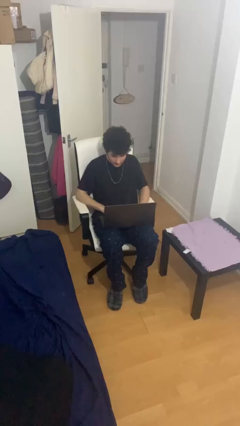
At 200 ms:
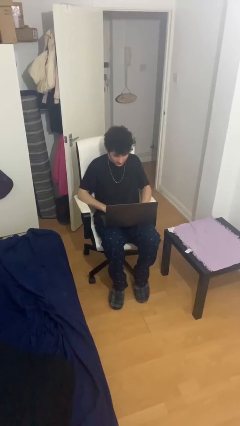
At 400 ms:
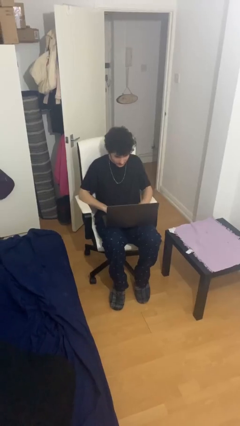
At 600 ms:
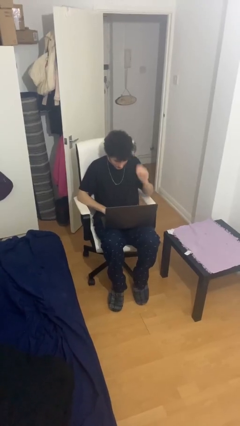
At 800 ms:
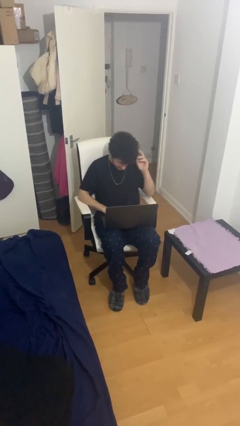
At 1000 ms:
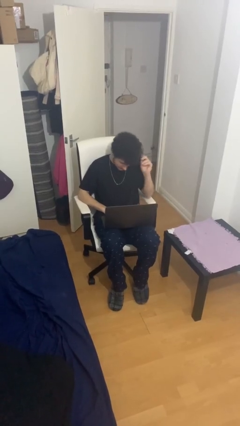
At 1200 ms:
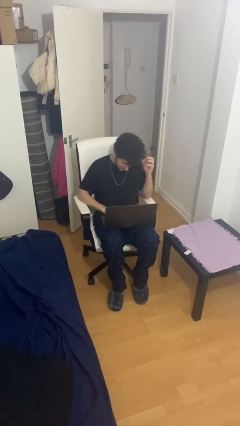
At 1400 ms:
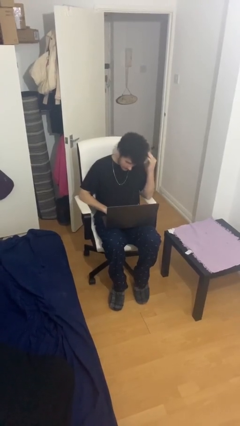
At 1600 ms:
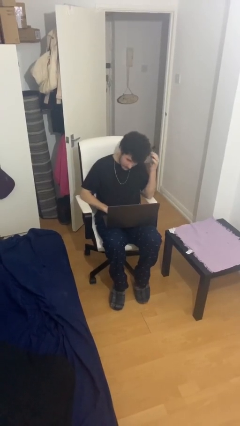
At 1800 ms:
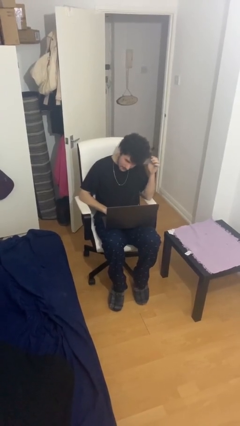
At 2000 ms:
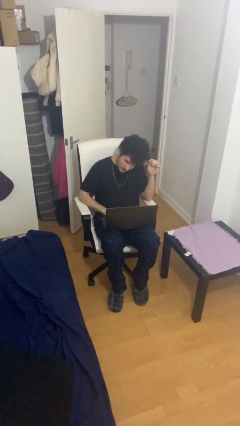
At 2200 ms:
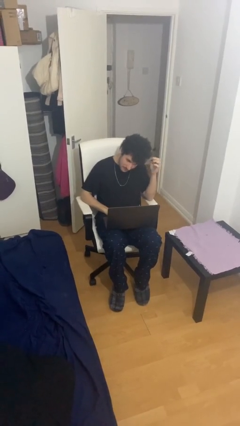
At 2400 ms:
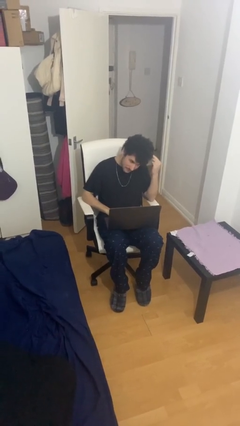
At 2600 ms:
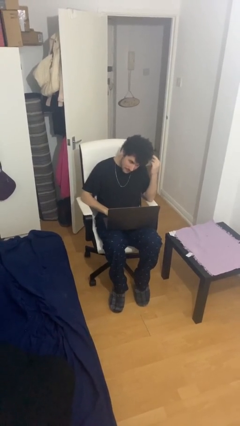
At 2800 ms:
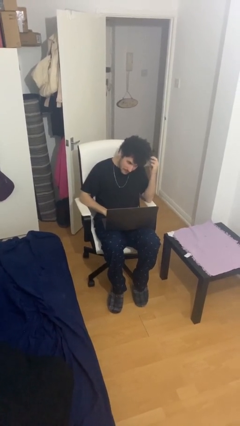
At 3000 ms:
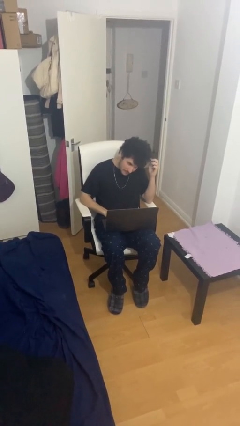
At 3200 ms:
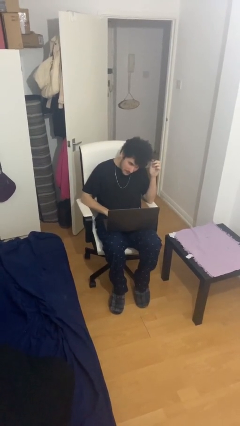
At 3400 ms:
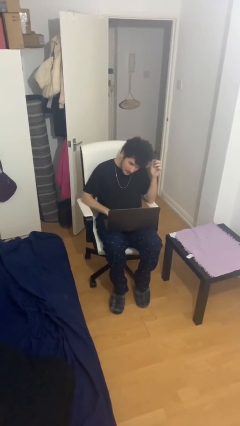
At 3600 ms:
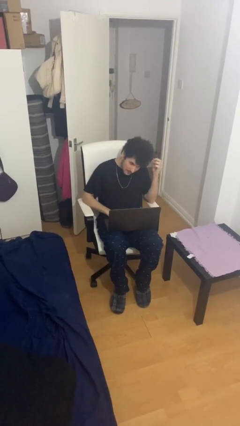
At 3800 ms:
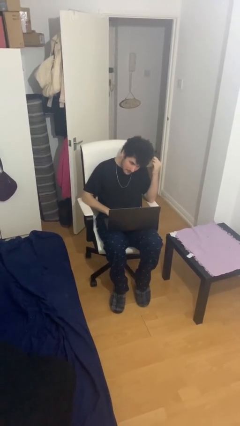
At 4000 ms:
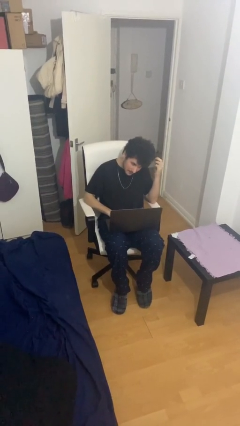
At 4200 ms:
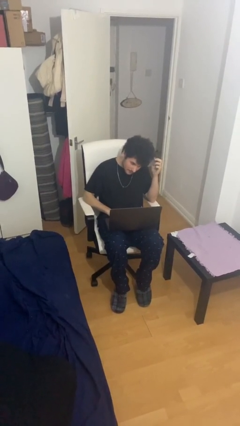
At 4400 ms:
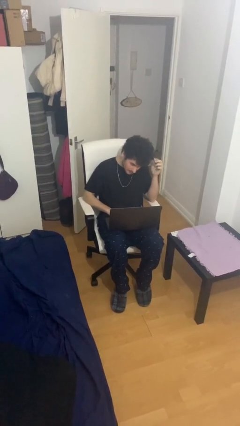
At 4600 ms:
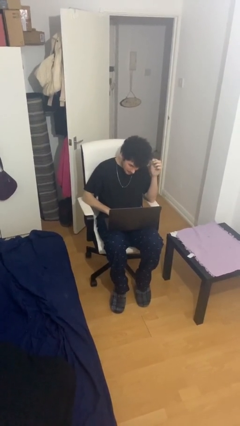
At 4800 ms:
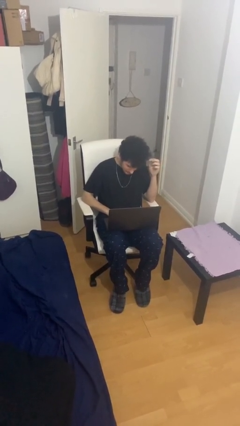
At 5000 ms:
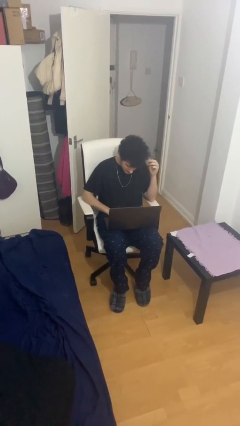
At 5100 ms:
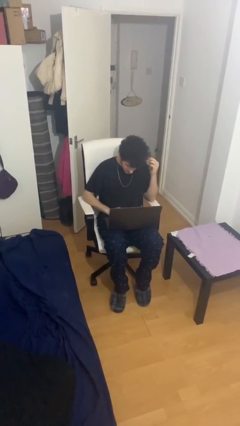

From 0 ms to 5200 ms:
person interacts with laptop

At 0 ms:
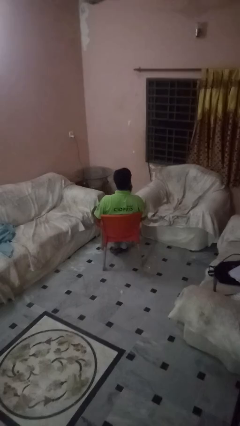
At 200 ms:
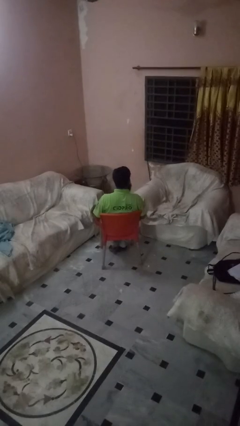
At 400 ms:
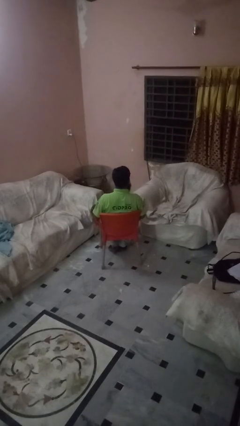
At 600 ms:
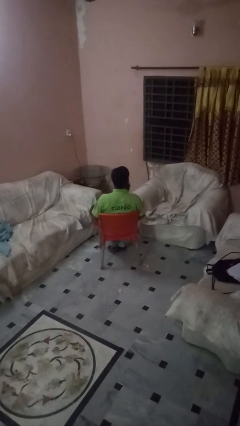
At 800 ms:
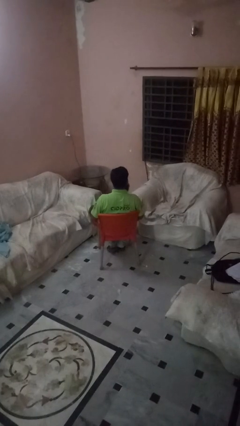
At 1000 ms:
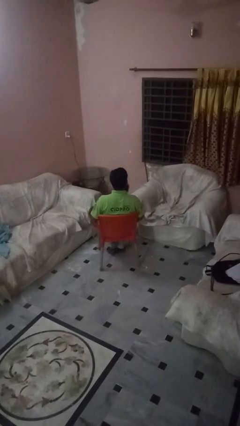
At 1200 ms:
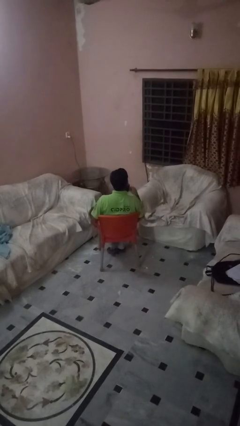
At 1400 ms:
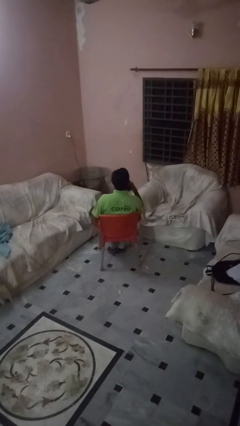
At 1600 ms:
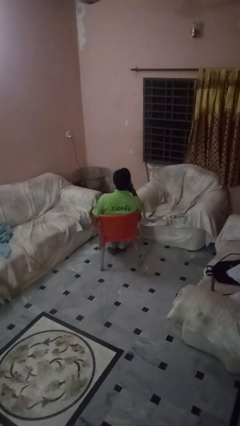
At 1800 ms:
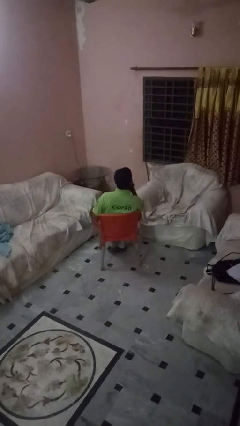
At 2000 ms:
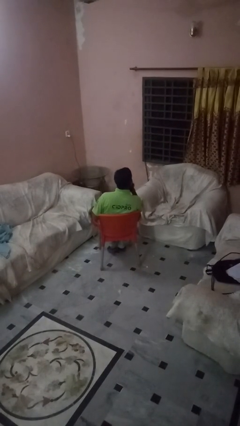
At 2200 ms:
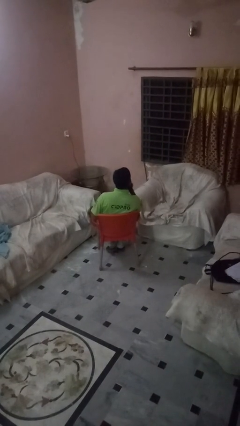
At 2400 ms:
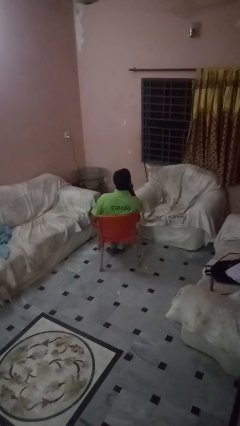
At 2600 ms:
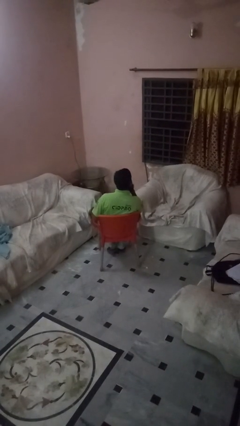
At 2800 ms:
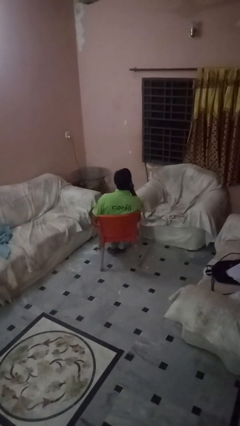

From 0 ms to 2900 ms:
person strokes chin

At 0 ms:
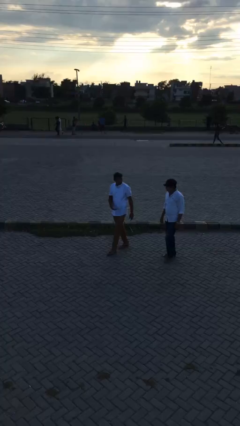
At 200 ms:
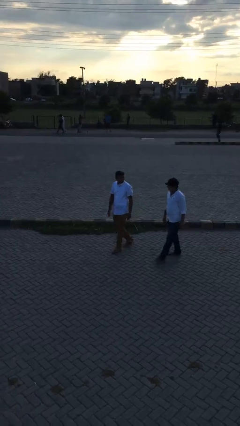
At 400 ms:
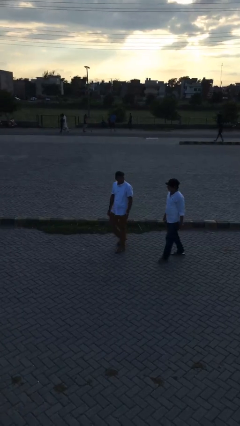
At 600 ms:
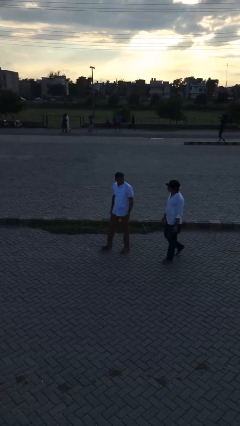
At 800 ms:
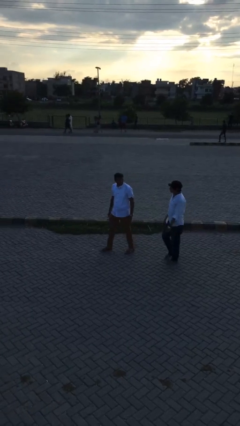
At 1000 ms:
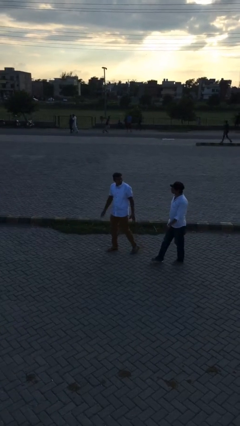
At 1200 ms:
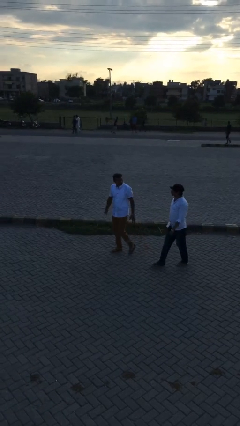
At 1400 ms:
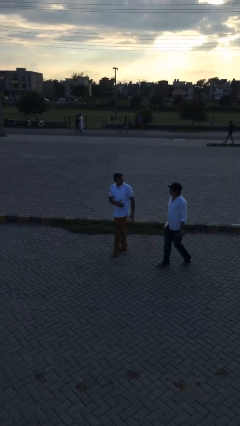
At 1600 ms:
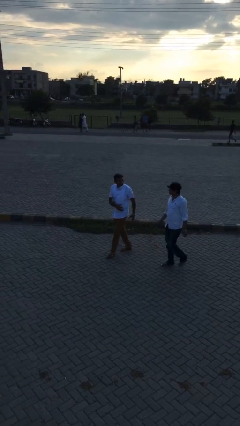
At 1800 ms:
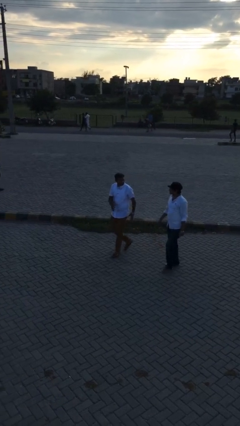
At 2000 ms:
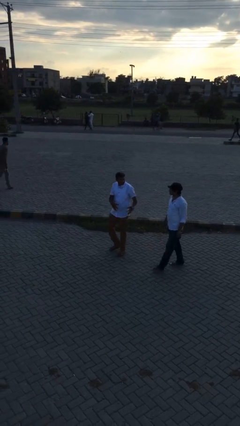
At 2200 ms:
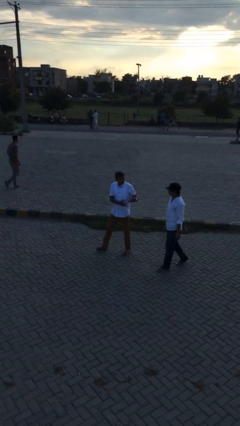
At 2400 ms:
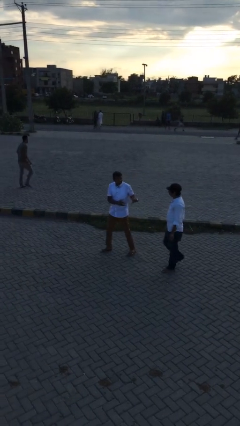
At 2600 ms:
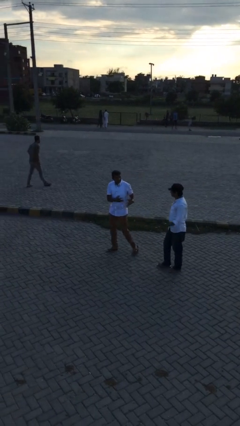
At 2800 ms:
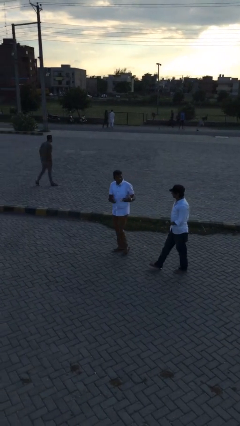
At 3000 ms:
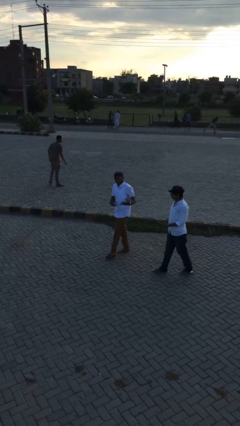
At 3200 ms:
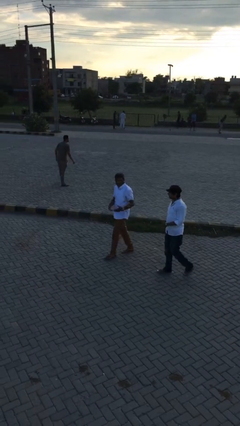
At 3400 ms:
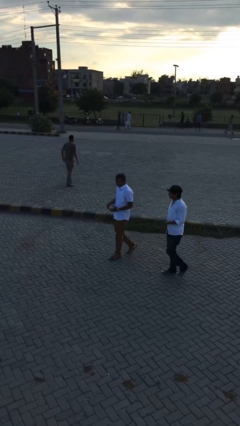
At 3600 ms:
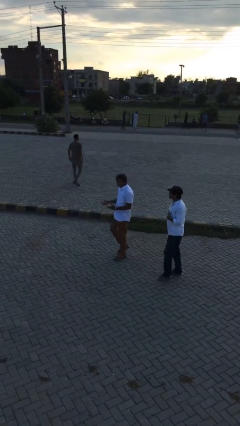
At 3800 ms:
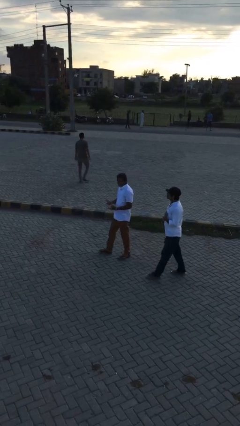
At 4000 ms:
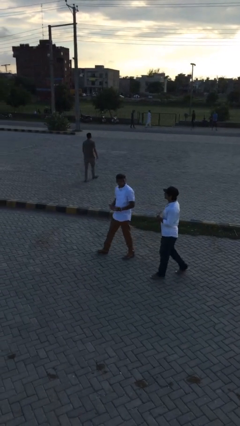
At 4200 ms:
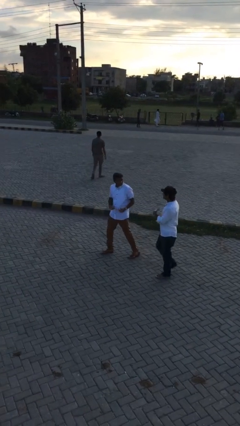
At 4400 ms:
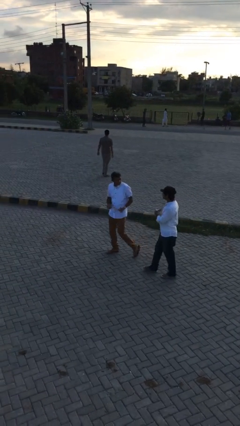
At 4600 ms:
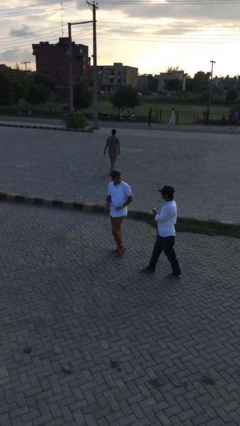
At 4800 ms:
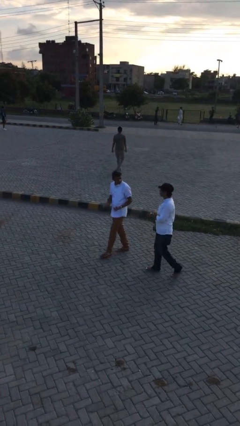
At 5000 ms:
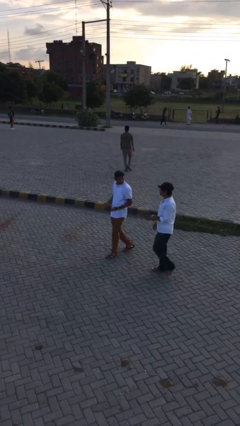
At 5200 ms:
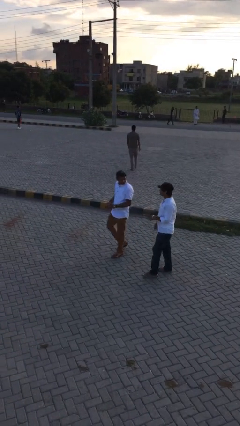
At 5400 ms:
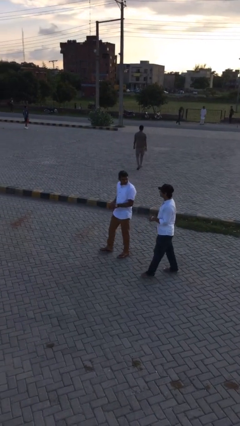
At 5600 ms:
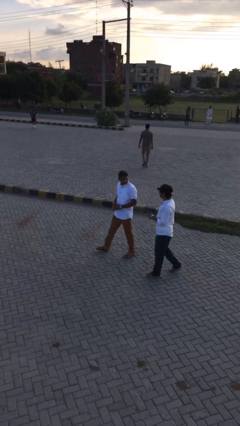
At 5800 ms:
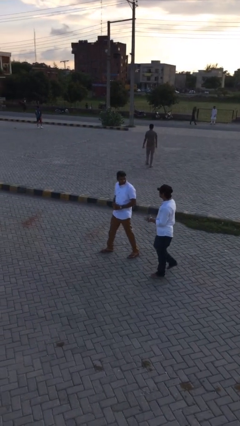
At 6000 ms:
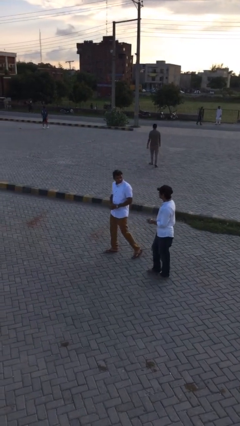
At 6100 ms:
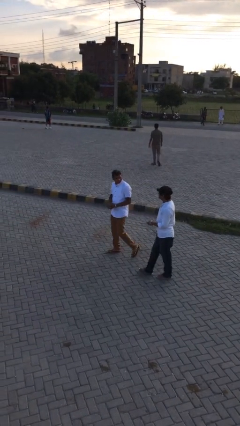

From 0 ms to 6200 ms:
person talks to person

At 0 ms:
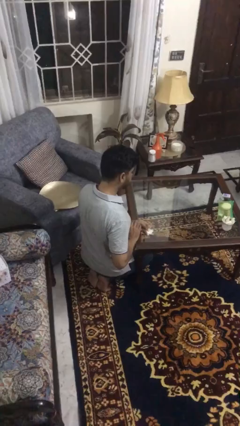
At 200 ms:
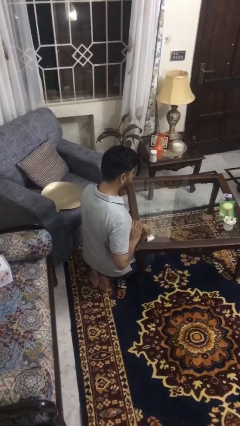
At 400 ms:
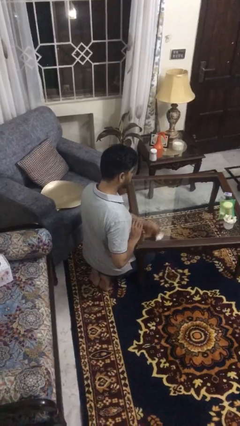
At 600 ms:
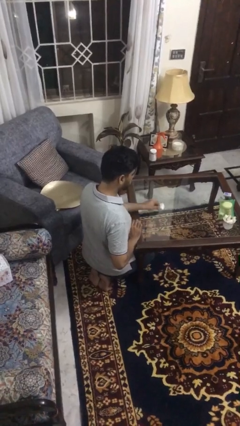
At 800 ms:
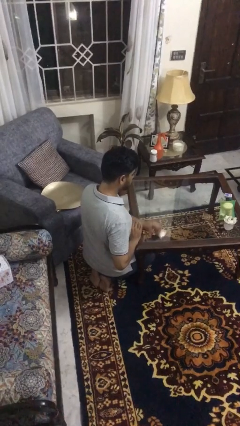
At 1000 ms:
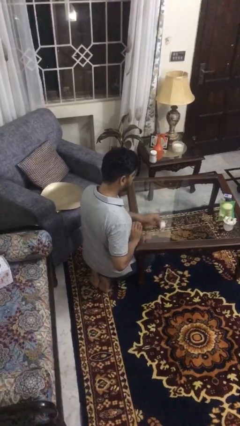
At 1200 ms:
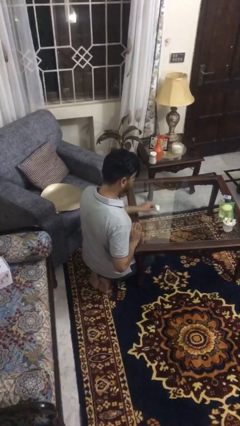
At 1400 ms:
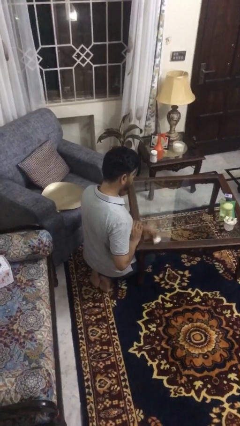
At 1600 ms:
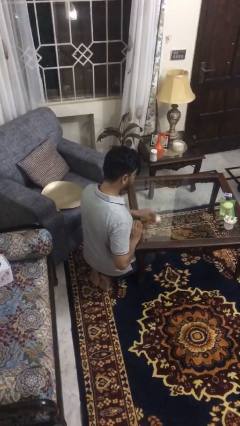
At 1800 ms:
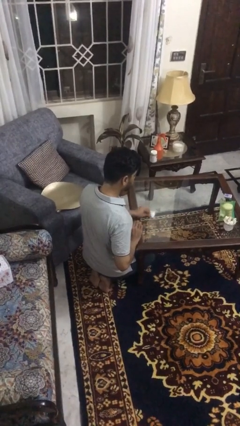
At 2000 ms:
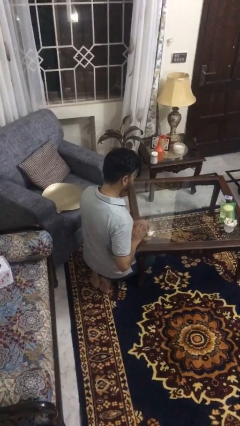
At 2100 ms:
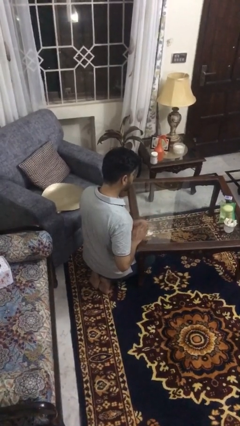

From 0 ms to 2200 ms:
person cleans table with rag

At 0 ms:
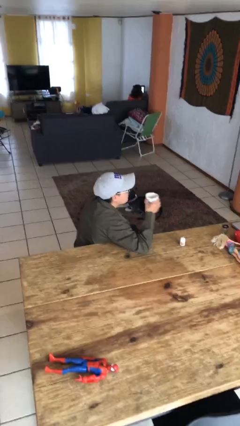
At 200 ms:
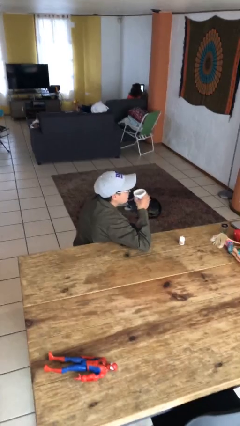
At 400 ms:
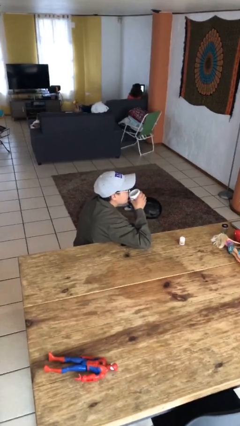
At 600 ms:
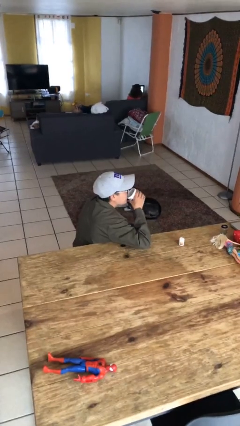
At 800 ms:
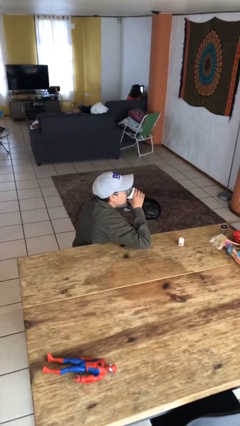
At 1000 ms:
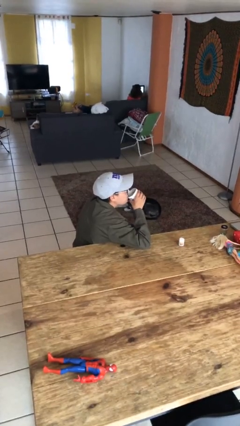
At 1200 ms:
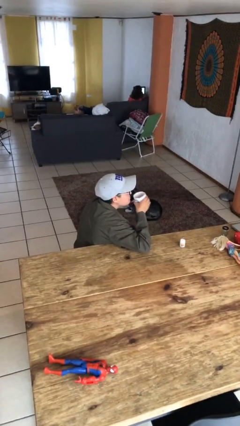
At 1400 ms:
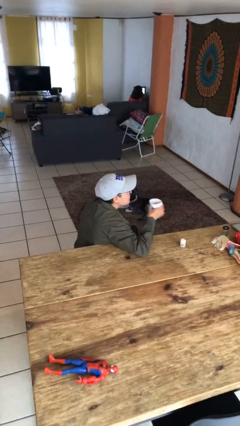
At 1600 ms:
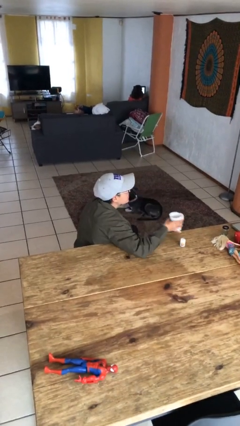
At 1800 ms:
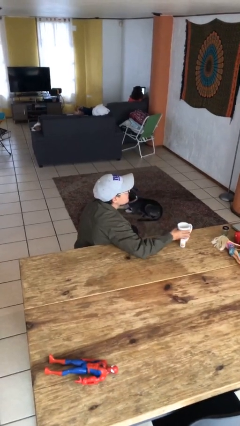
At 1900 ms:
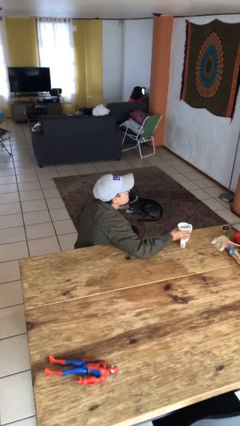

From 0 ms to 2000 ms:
person drinks from cup
